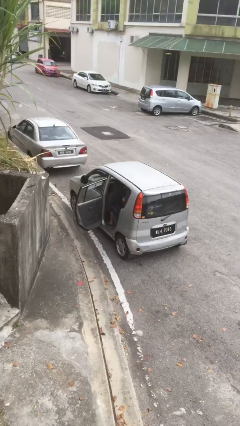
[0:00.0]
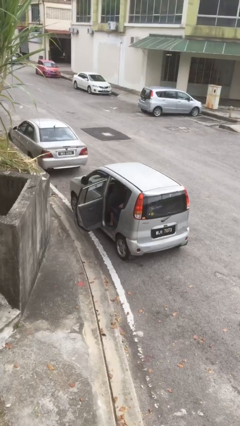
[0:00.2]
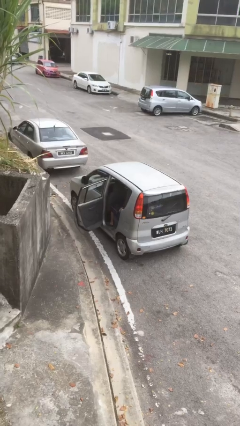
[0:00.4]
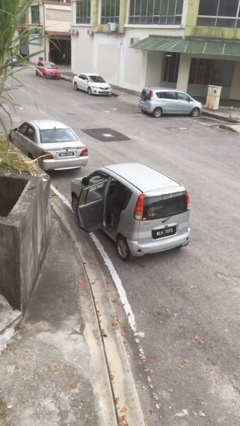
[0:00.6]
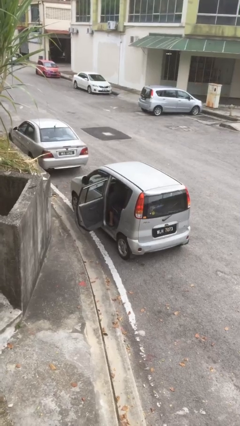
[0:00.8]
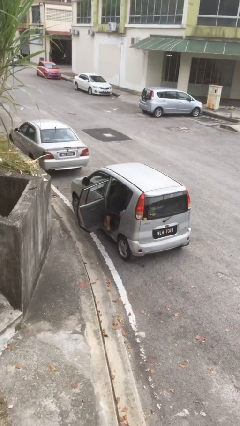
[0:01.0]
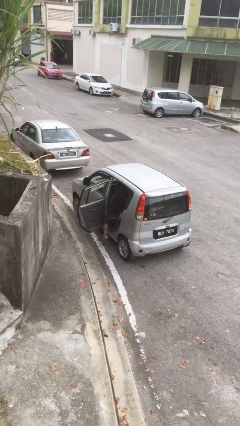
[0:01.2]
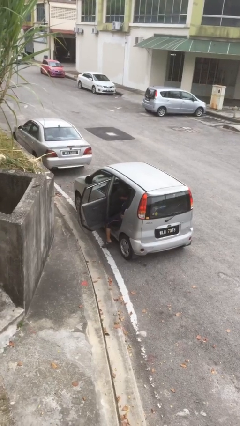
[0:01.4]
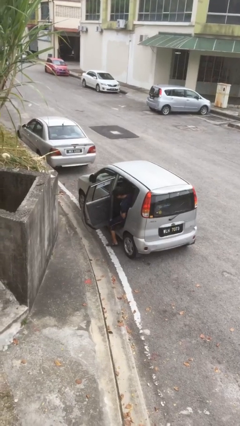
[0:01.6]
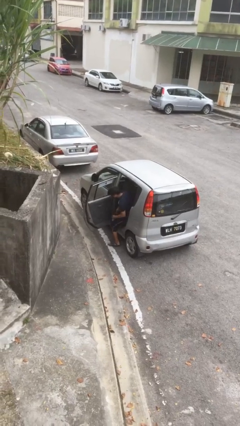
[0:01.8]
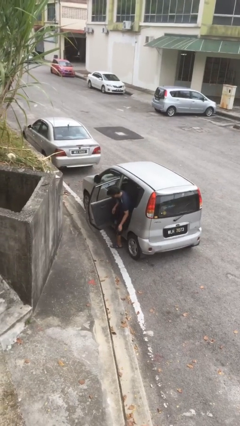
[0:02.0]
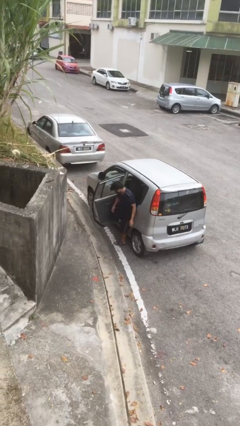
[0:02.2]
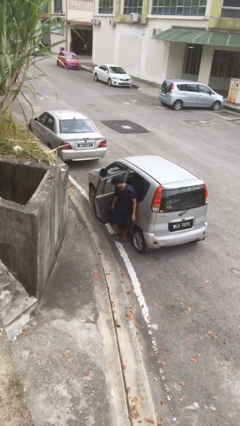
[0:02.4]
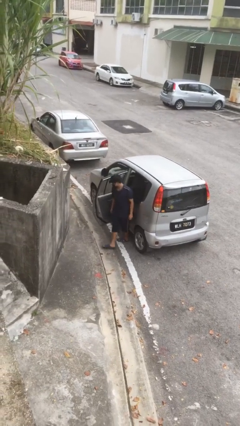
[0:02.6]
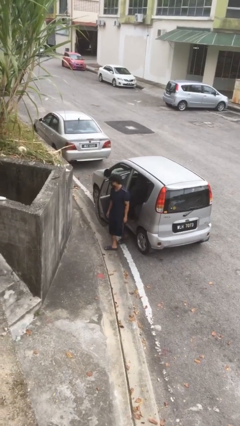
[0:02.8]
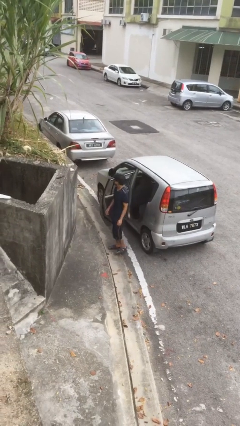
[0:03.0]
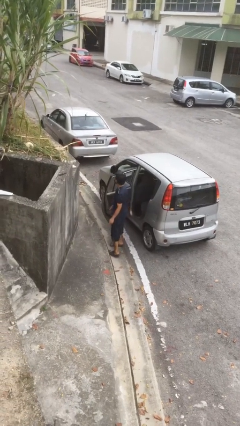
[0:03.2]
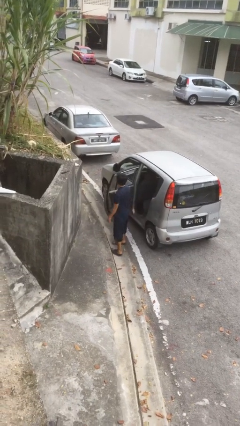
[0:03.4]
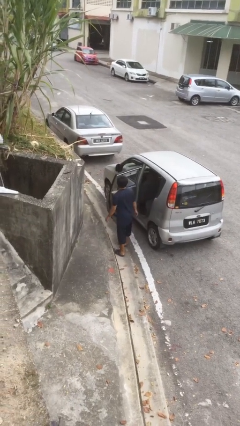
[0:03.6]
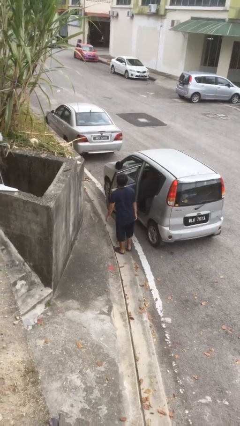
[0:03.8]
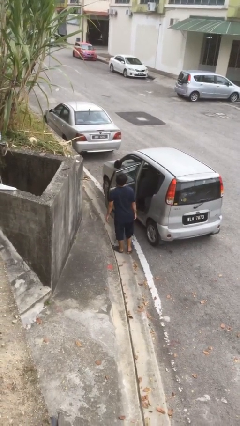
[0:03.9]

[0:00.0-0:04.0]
person exits car

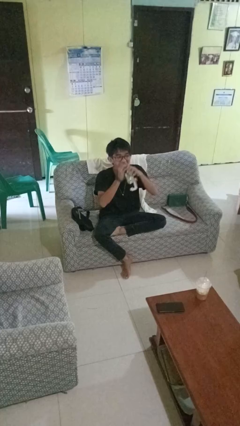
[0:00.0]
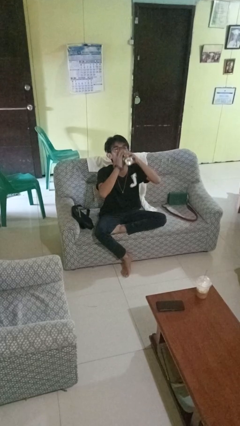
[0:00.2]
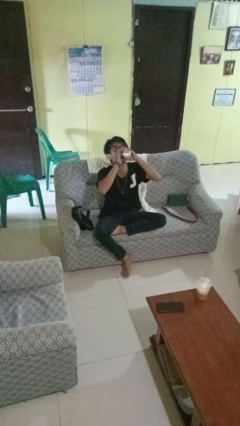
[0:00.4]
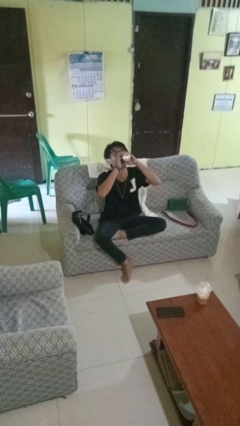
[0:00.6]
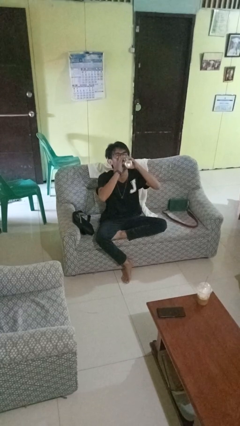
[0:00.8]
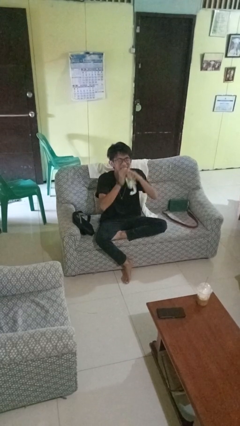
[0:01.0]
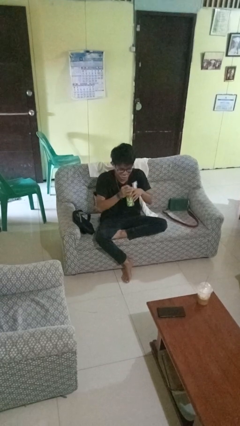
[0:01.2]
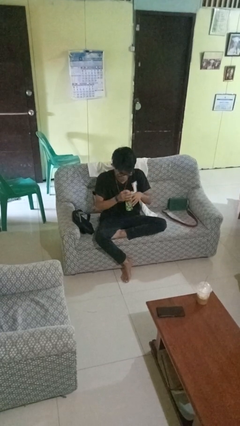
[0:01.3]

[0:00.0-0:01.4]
person drinks from beverage can

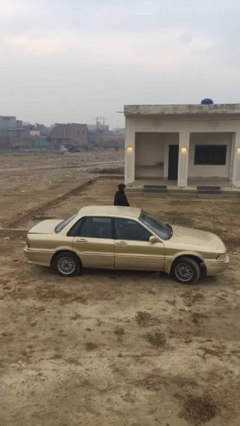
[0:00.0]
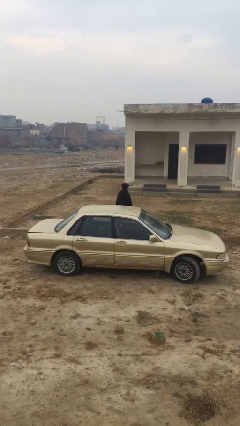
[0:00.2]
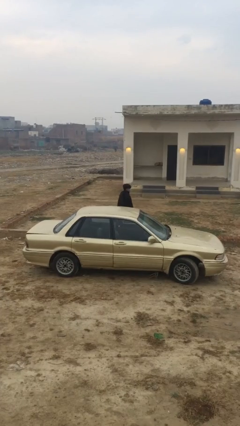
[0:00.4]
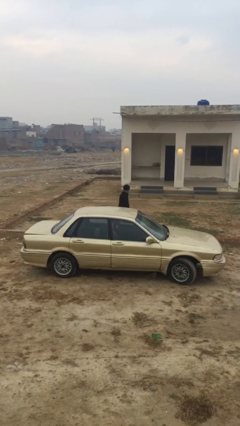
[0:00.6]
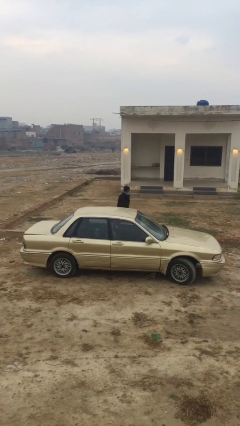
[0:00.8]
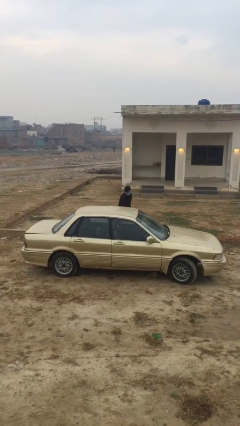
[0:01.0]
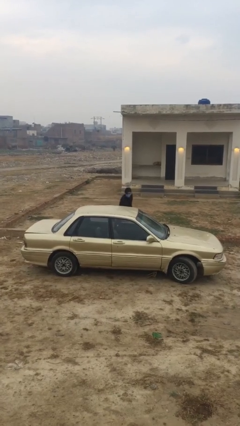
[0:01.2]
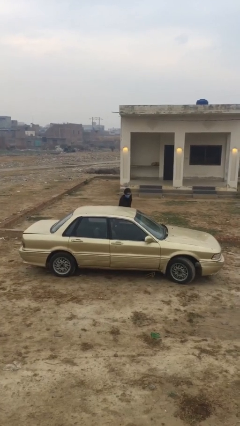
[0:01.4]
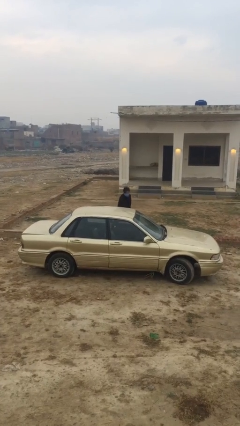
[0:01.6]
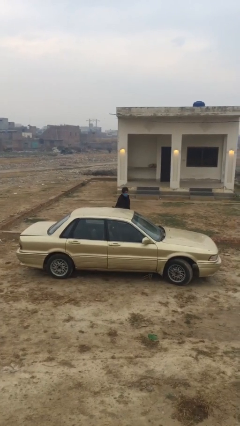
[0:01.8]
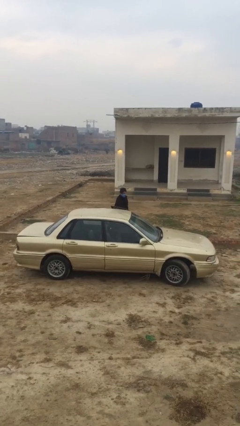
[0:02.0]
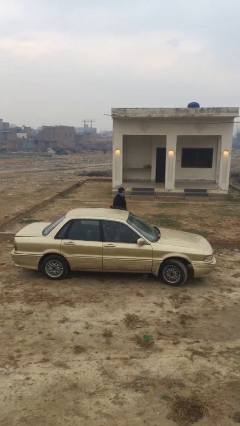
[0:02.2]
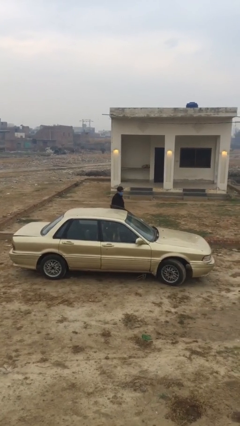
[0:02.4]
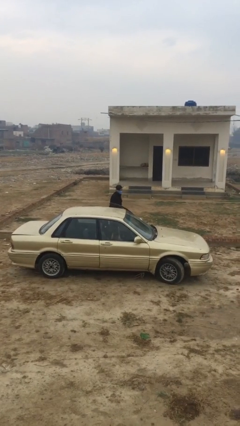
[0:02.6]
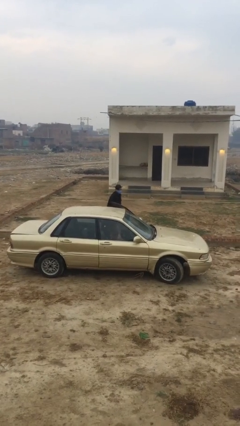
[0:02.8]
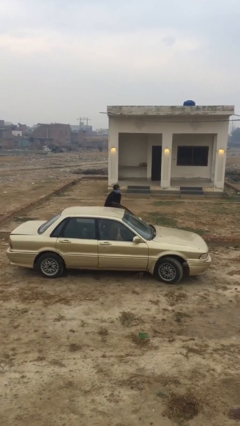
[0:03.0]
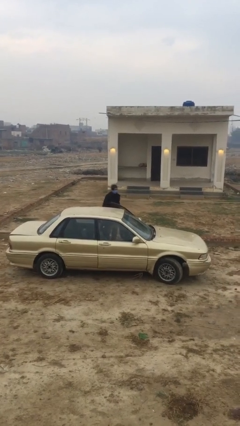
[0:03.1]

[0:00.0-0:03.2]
person opens car door

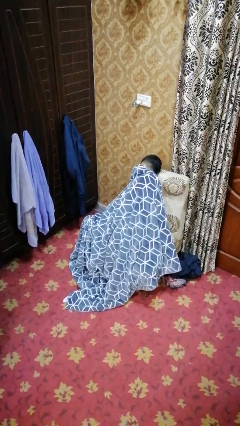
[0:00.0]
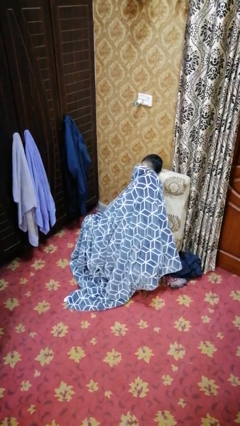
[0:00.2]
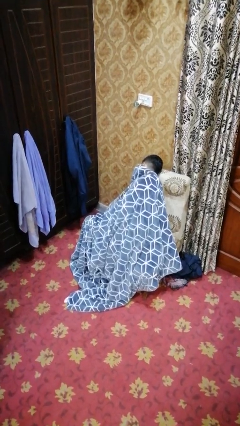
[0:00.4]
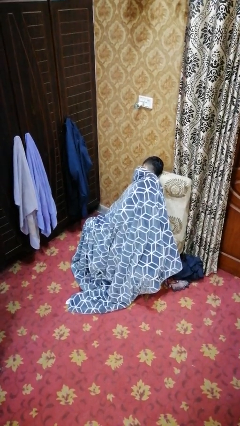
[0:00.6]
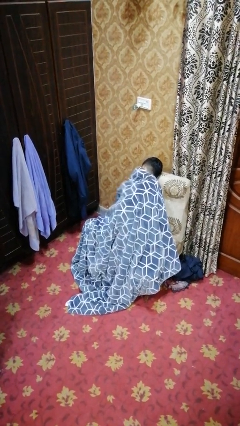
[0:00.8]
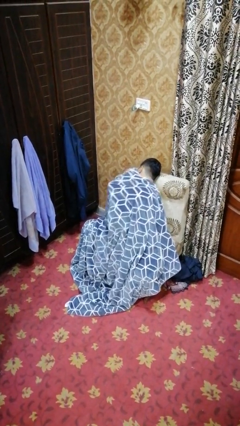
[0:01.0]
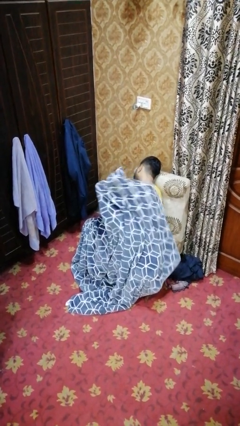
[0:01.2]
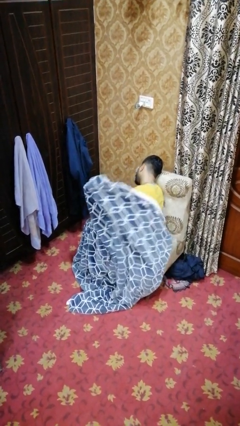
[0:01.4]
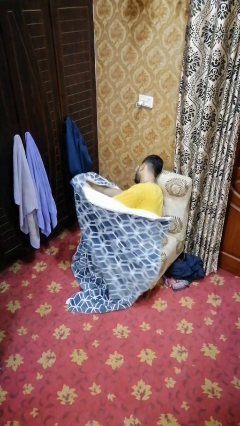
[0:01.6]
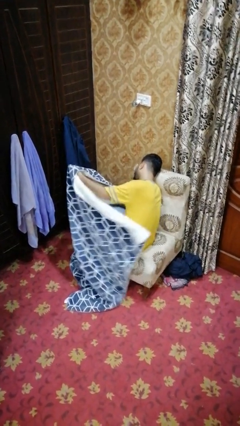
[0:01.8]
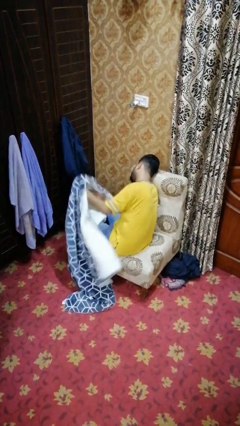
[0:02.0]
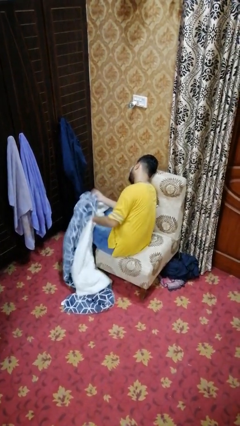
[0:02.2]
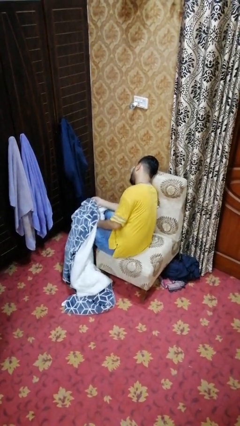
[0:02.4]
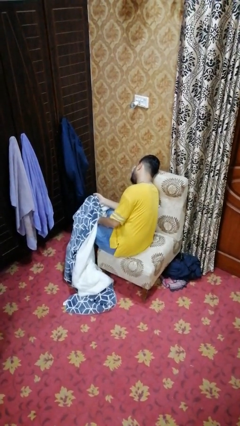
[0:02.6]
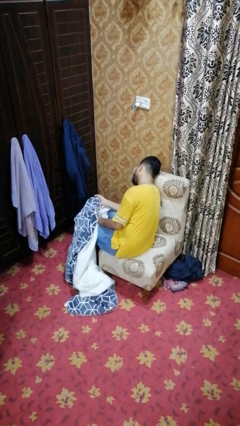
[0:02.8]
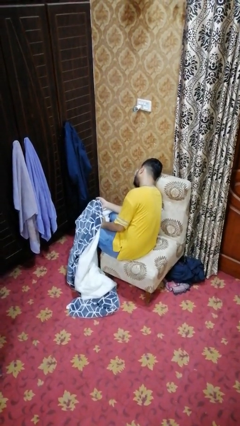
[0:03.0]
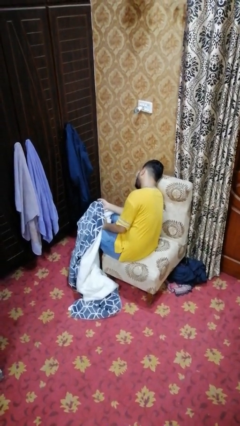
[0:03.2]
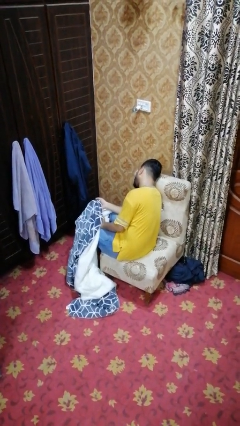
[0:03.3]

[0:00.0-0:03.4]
person uncovers with blanket

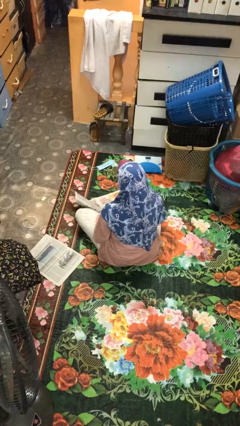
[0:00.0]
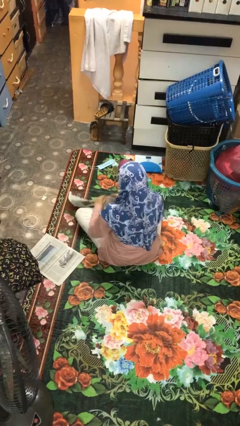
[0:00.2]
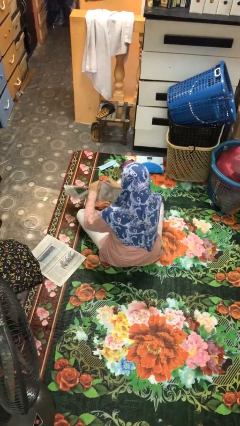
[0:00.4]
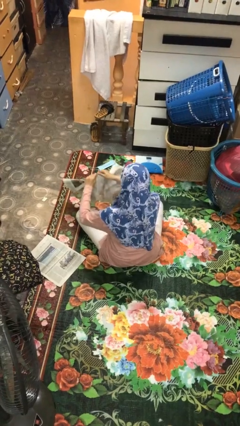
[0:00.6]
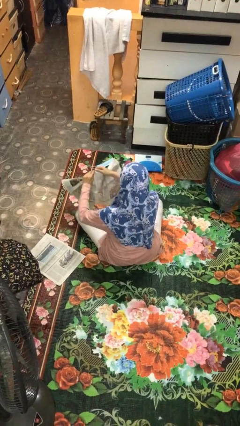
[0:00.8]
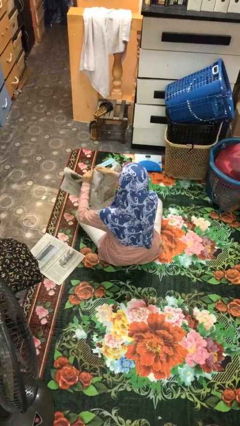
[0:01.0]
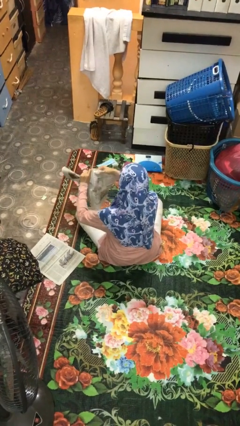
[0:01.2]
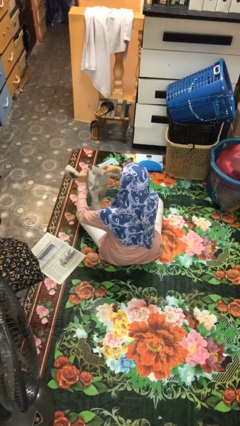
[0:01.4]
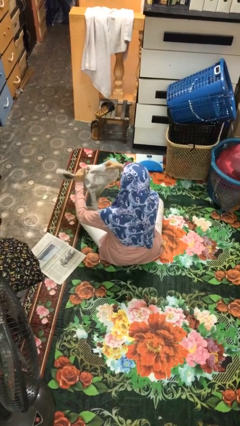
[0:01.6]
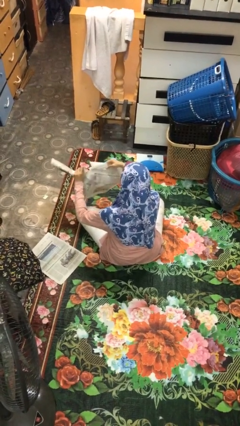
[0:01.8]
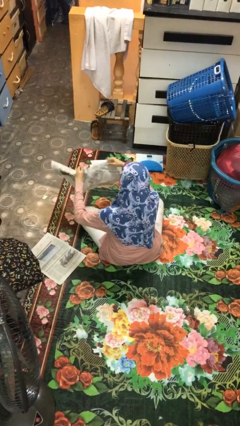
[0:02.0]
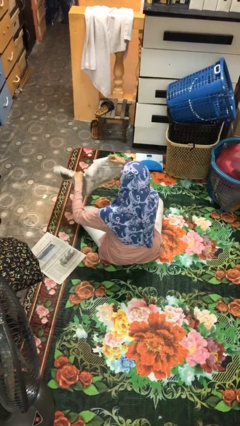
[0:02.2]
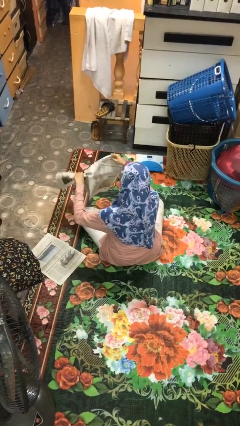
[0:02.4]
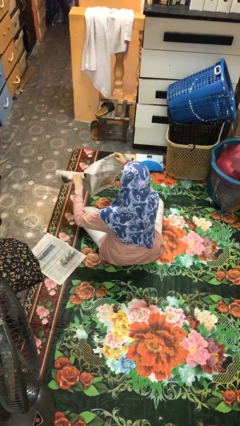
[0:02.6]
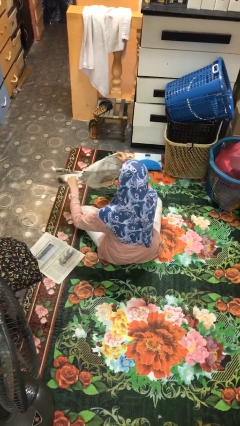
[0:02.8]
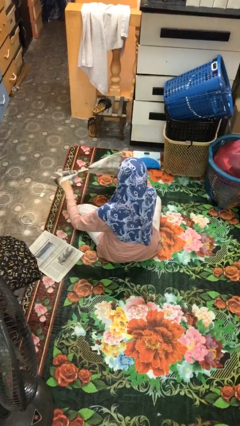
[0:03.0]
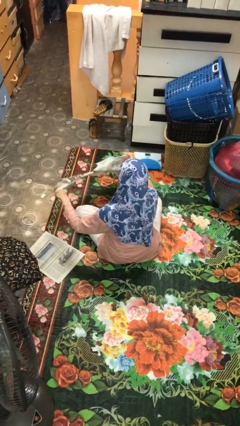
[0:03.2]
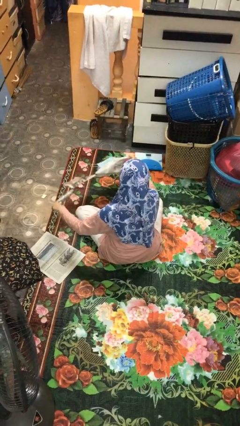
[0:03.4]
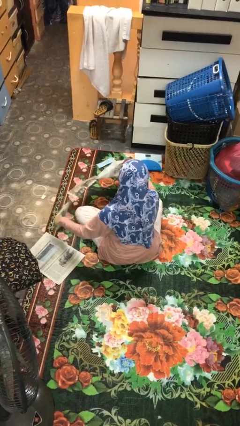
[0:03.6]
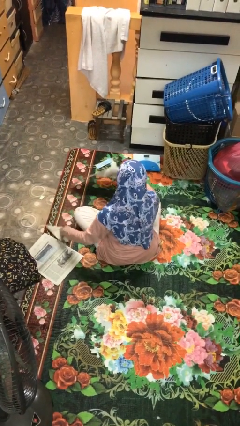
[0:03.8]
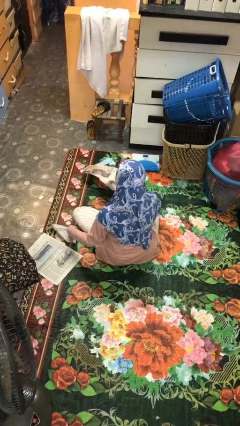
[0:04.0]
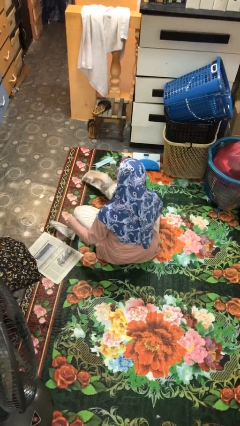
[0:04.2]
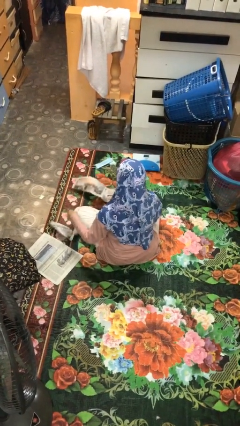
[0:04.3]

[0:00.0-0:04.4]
person tears paper

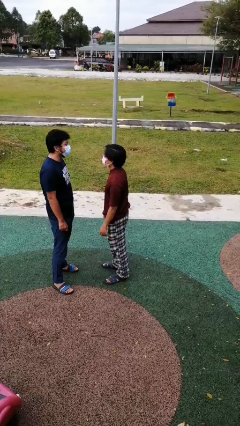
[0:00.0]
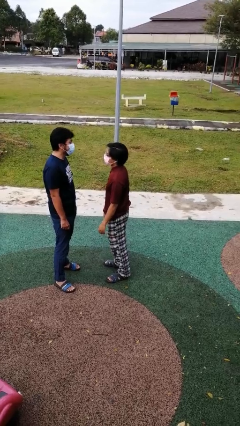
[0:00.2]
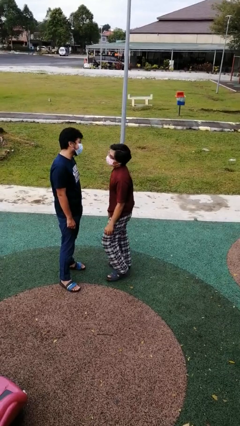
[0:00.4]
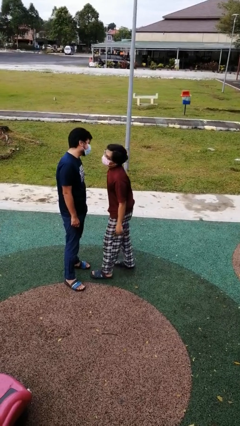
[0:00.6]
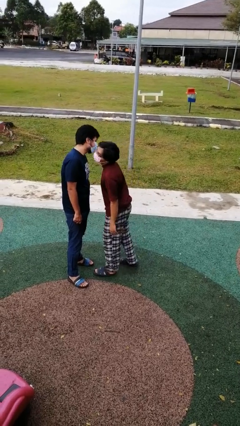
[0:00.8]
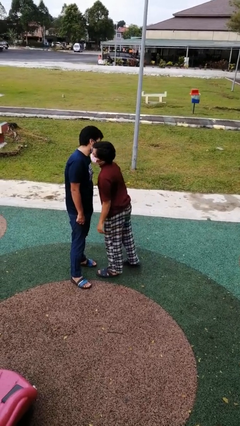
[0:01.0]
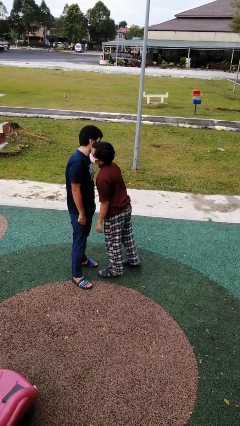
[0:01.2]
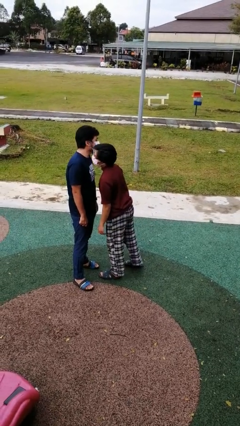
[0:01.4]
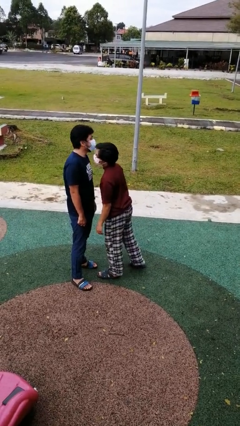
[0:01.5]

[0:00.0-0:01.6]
person kisses cheek of person
